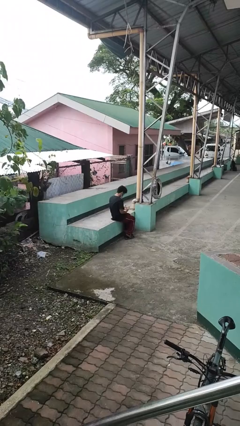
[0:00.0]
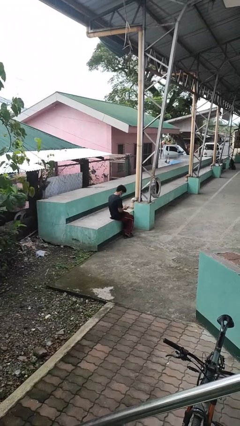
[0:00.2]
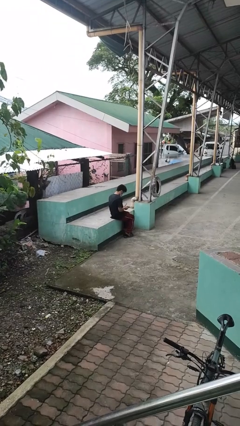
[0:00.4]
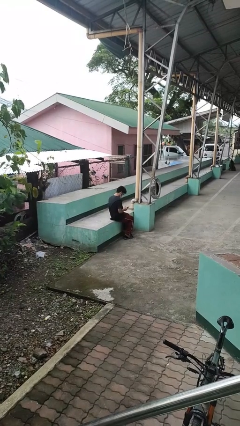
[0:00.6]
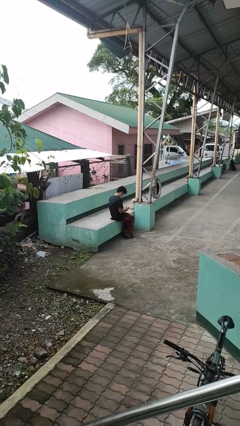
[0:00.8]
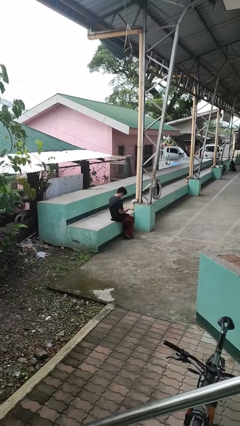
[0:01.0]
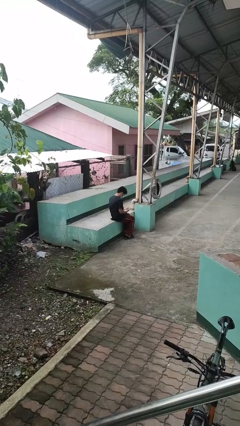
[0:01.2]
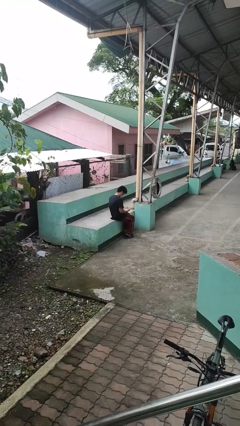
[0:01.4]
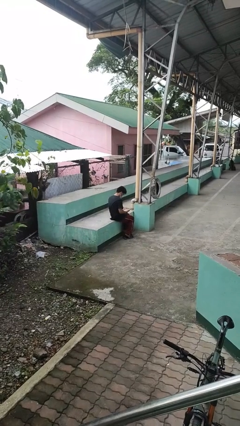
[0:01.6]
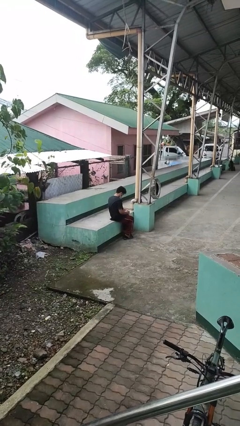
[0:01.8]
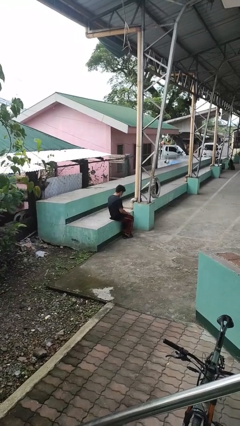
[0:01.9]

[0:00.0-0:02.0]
person looks at hands in lap

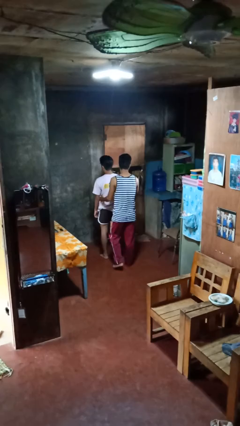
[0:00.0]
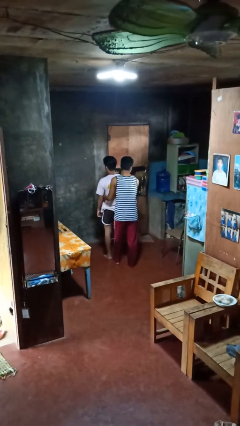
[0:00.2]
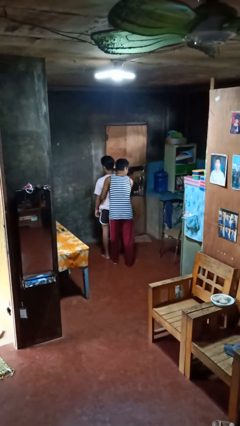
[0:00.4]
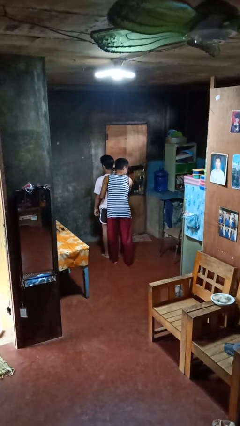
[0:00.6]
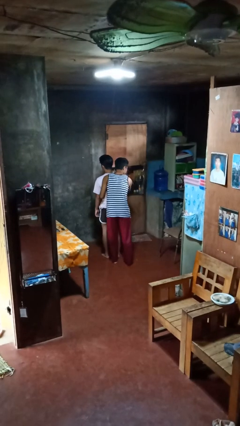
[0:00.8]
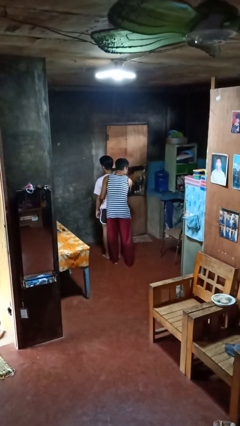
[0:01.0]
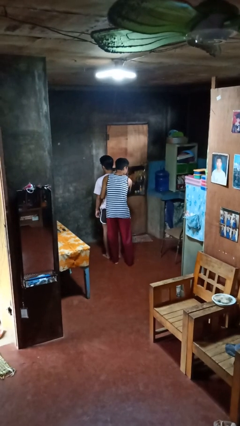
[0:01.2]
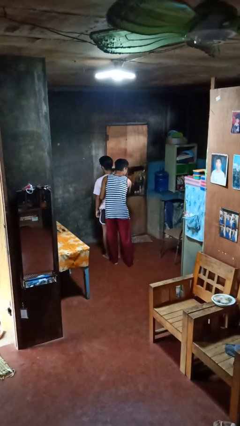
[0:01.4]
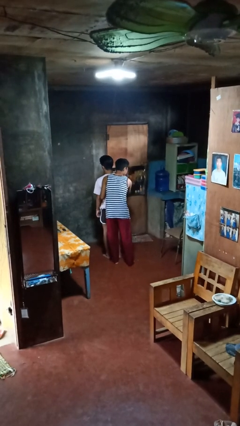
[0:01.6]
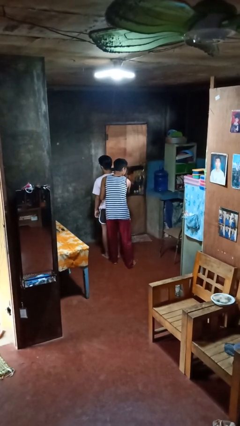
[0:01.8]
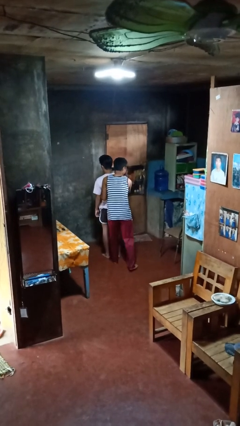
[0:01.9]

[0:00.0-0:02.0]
person hugs person from behind

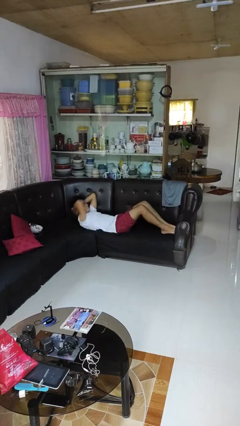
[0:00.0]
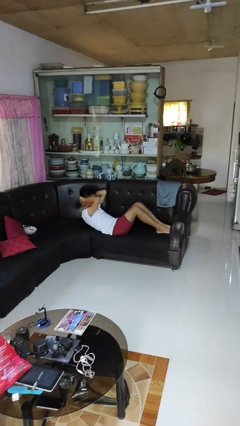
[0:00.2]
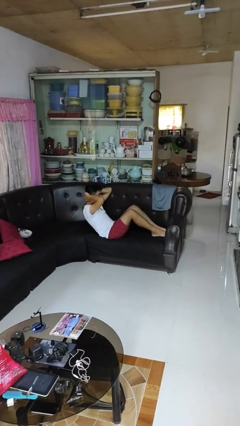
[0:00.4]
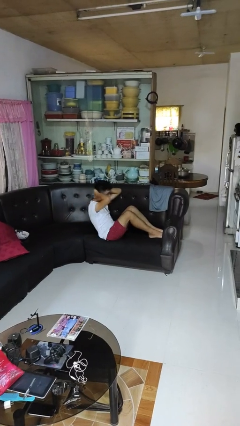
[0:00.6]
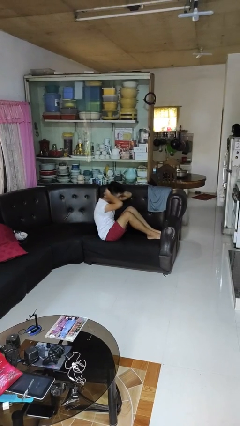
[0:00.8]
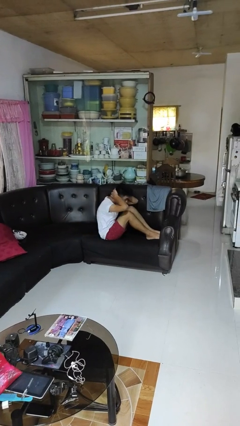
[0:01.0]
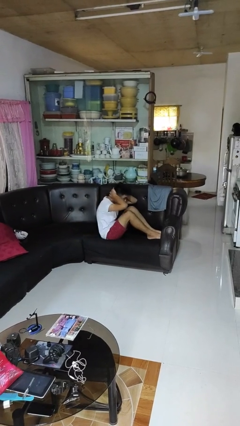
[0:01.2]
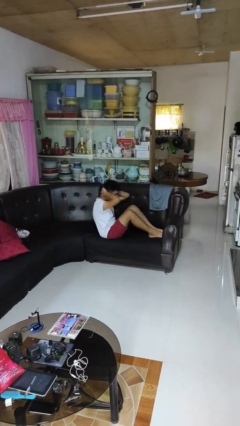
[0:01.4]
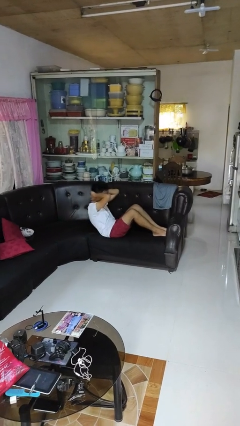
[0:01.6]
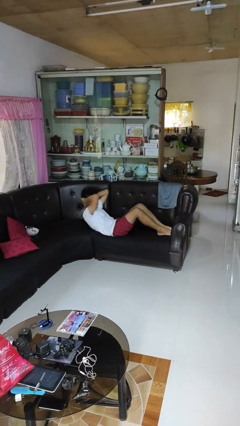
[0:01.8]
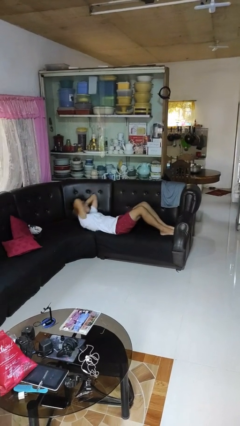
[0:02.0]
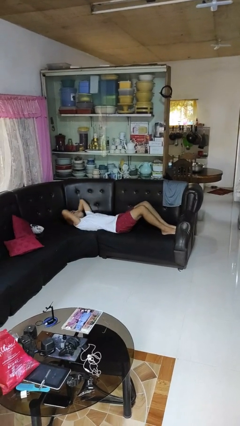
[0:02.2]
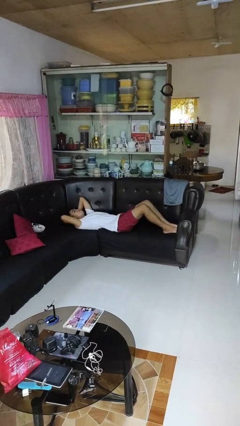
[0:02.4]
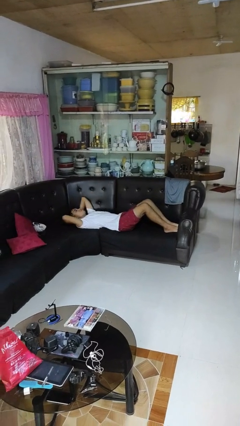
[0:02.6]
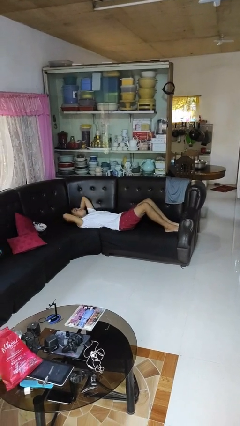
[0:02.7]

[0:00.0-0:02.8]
person exercises with situp

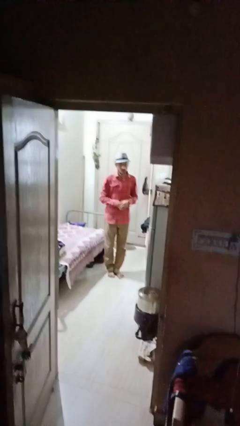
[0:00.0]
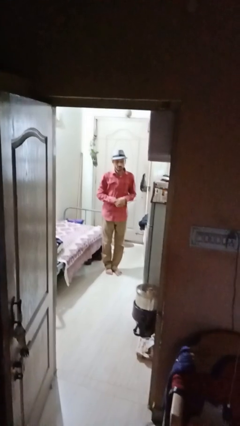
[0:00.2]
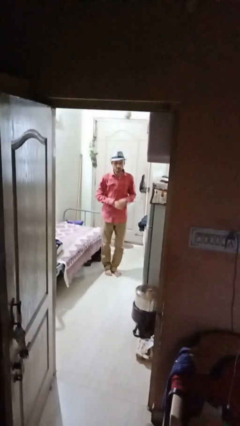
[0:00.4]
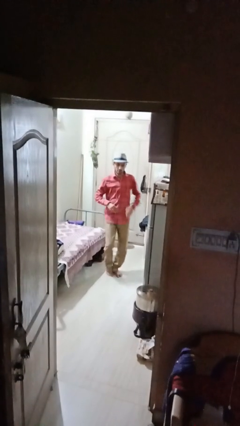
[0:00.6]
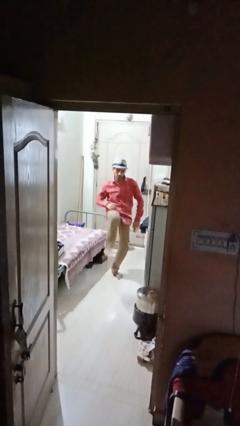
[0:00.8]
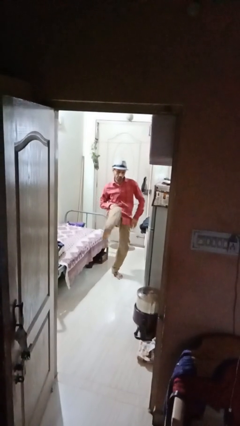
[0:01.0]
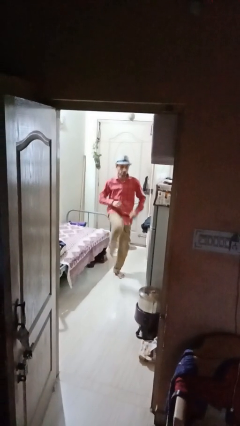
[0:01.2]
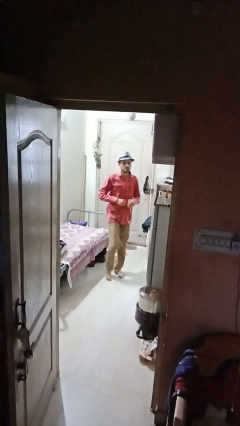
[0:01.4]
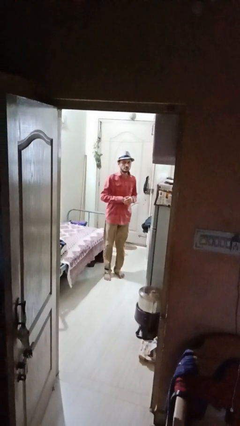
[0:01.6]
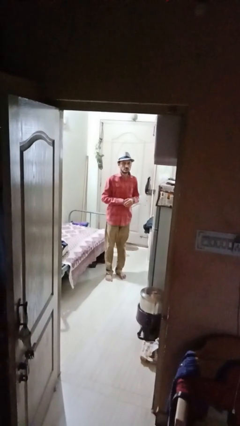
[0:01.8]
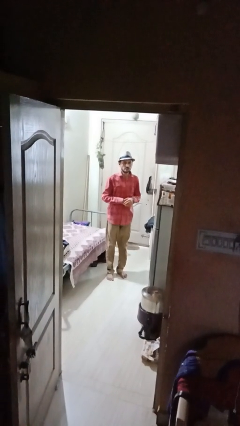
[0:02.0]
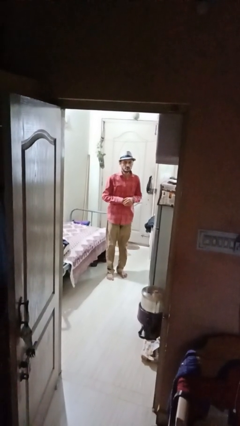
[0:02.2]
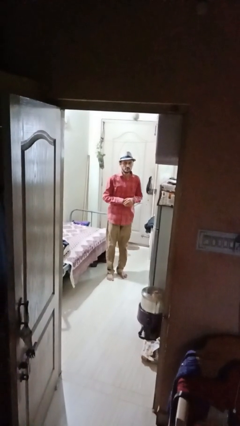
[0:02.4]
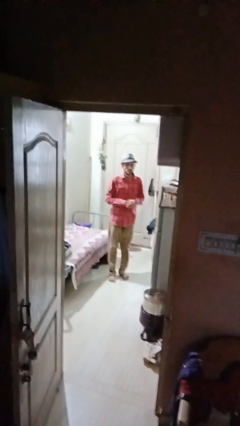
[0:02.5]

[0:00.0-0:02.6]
person karate kicks

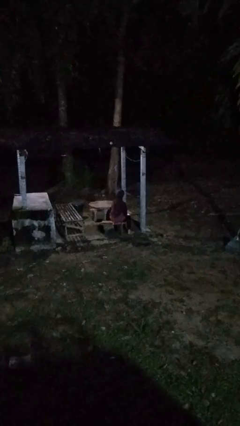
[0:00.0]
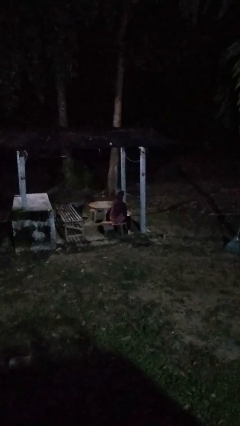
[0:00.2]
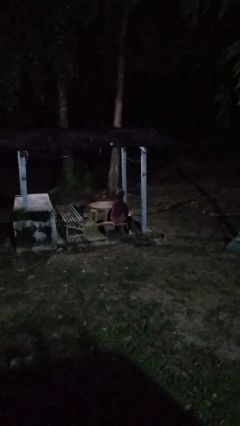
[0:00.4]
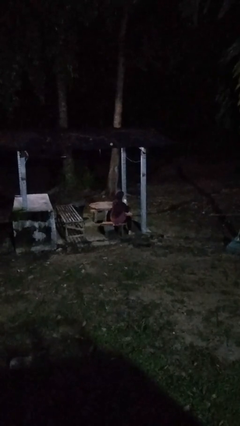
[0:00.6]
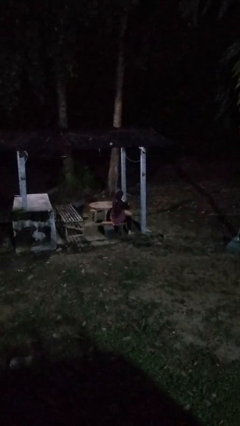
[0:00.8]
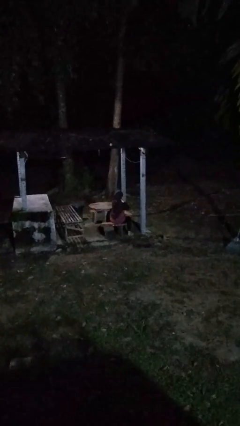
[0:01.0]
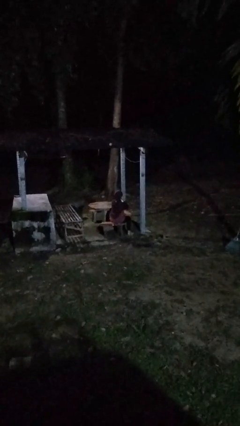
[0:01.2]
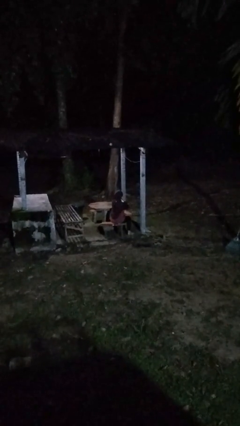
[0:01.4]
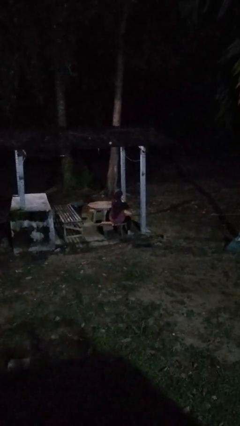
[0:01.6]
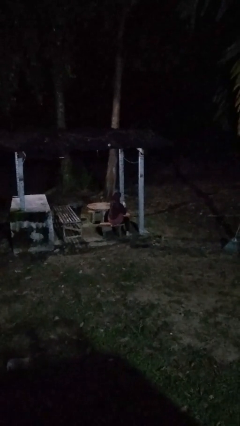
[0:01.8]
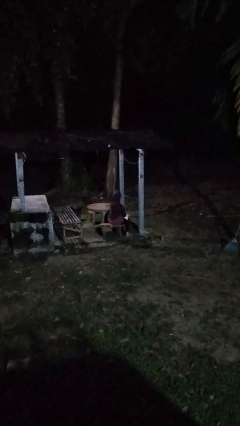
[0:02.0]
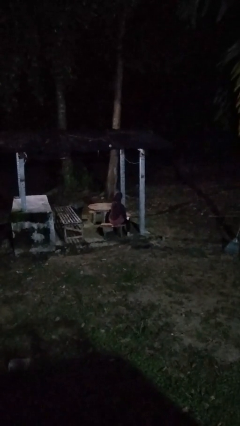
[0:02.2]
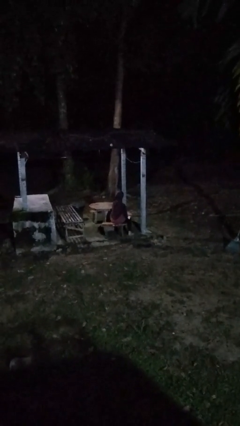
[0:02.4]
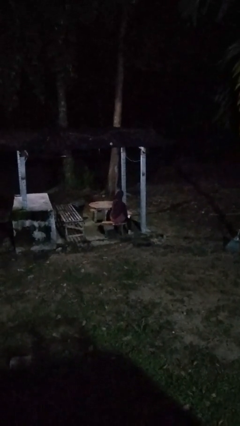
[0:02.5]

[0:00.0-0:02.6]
person blows nose

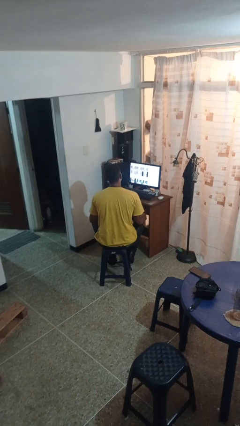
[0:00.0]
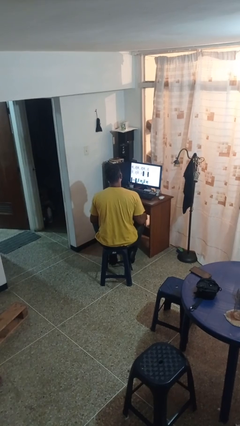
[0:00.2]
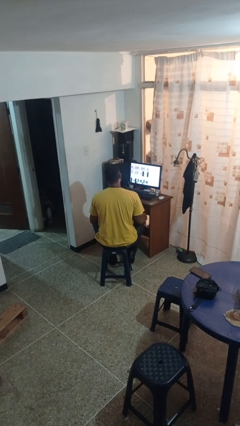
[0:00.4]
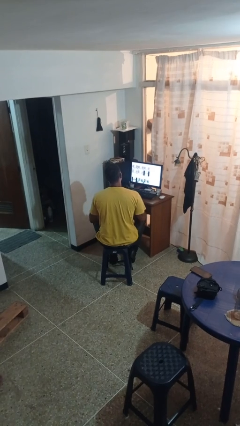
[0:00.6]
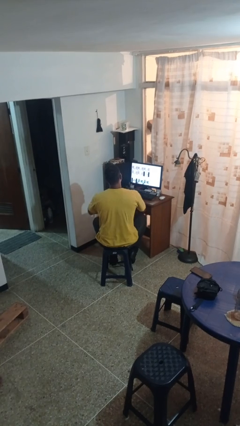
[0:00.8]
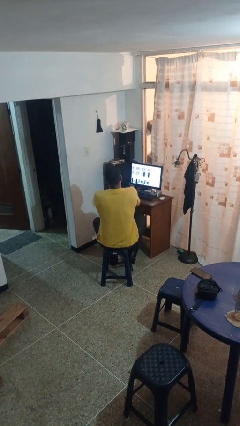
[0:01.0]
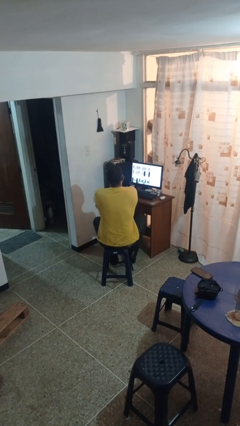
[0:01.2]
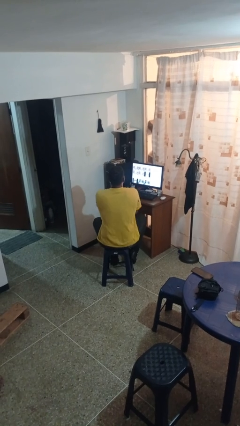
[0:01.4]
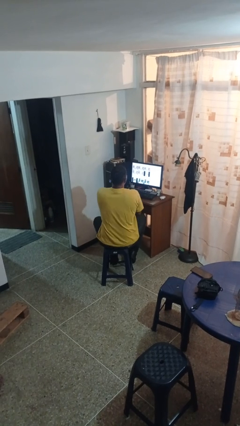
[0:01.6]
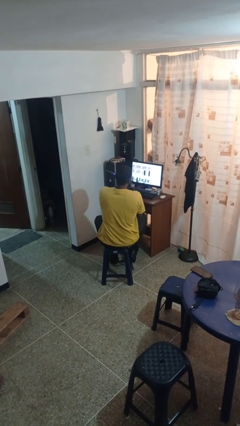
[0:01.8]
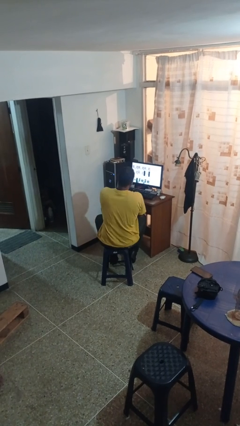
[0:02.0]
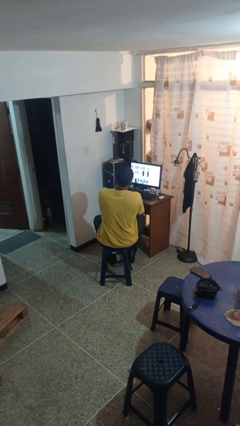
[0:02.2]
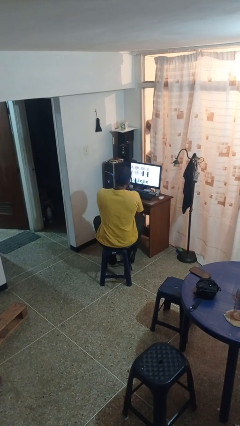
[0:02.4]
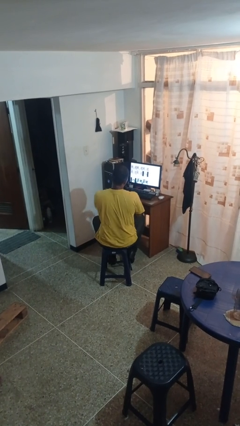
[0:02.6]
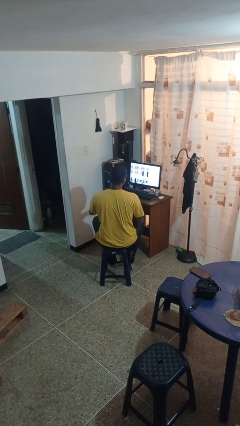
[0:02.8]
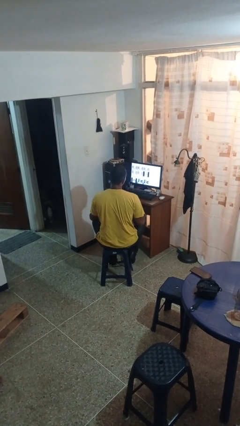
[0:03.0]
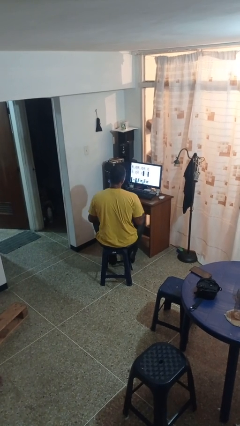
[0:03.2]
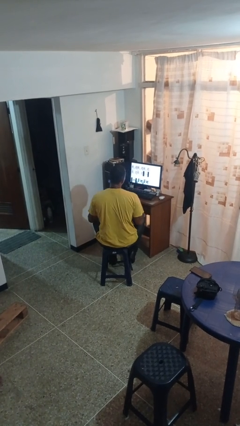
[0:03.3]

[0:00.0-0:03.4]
person crosses arms

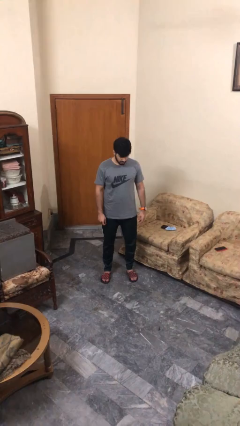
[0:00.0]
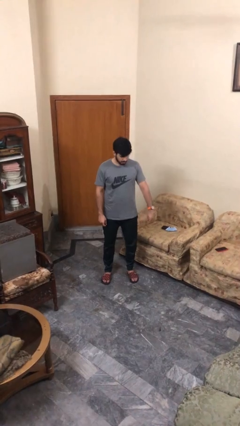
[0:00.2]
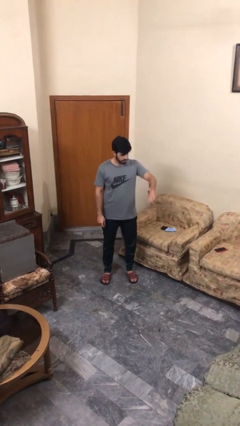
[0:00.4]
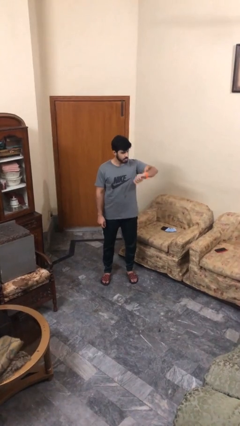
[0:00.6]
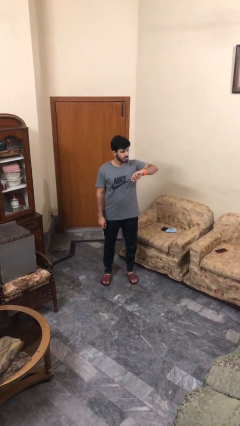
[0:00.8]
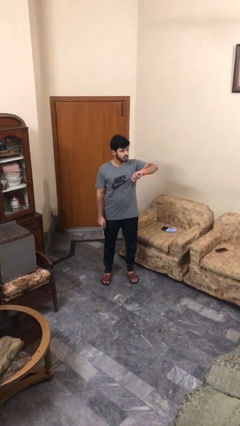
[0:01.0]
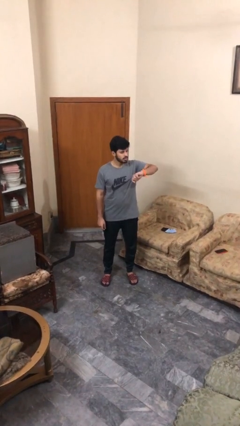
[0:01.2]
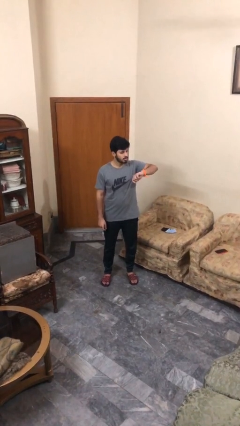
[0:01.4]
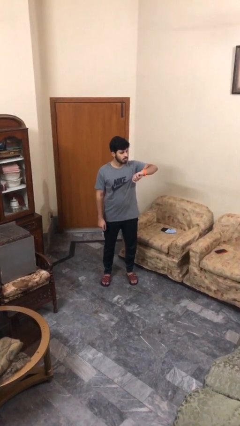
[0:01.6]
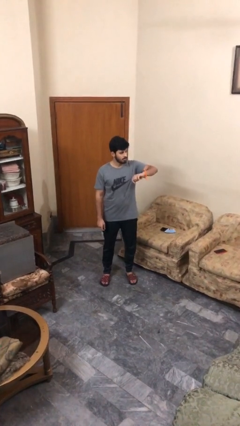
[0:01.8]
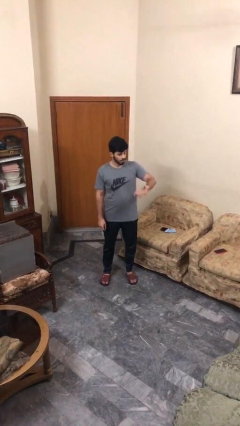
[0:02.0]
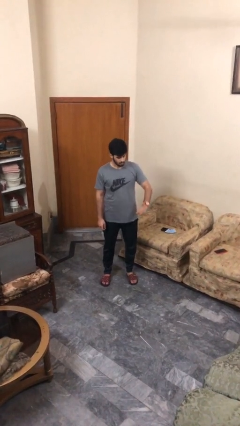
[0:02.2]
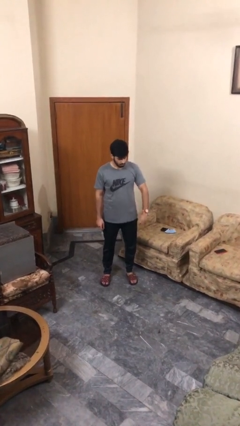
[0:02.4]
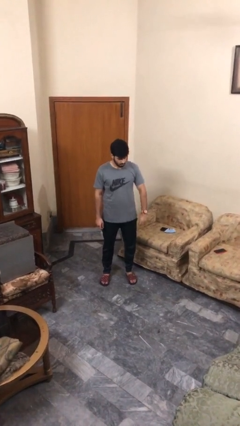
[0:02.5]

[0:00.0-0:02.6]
person looks at wristwatch
